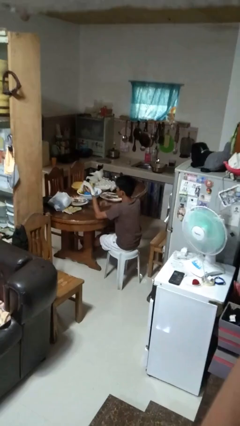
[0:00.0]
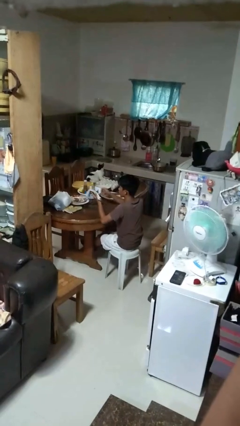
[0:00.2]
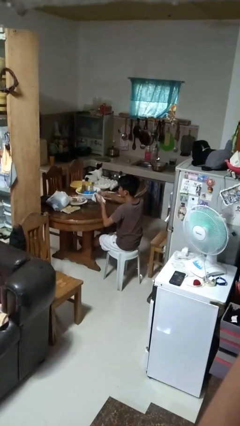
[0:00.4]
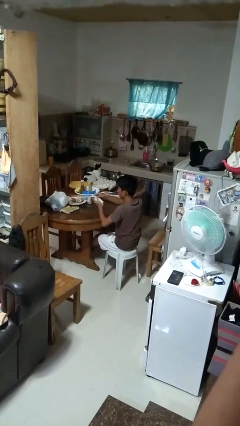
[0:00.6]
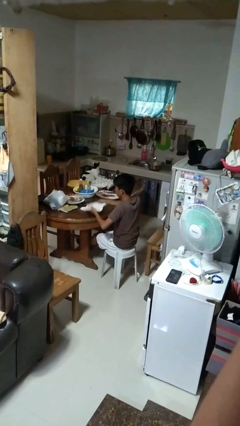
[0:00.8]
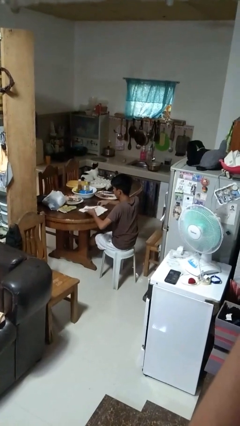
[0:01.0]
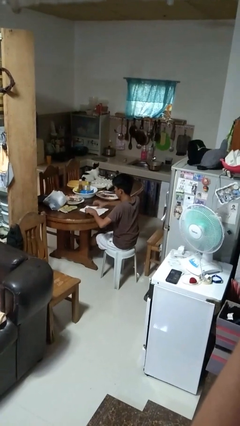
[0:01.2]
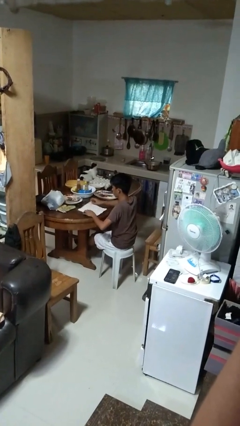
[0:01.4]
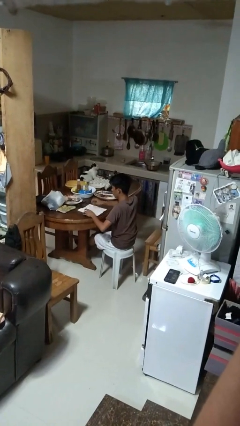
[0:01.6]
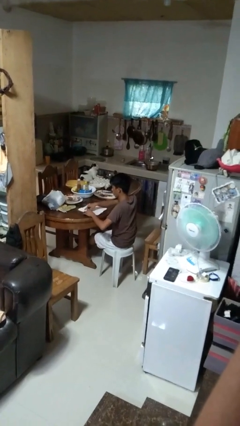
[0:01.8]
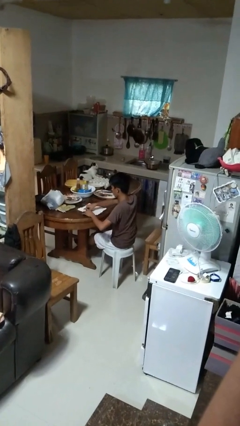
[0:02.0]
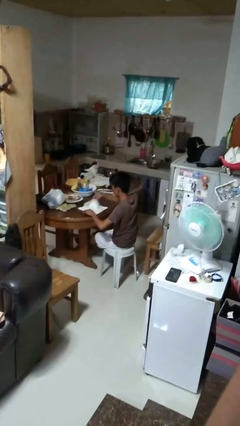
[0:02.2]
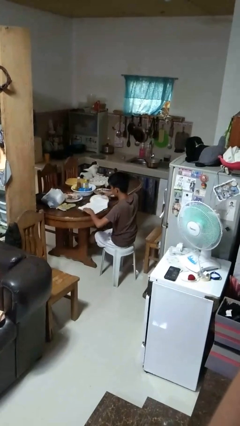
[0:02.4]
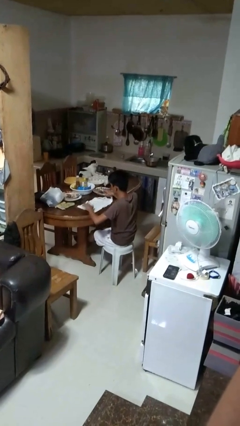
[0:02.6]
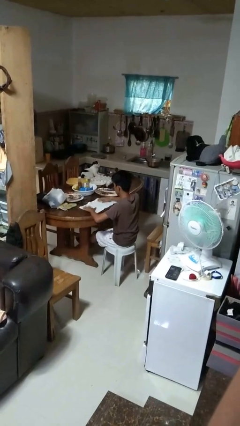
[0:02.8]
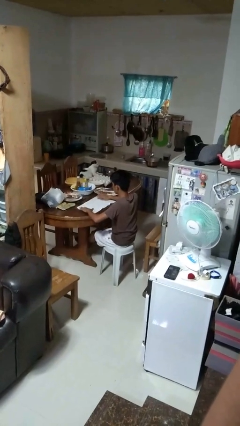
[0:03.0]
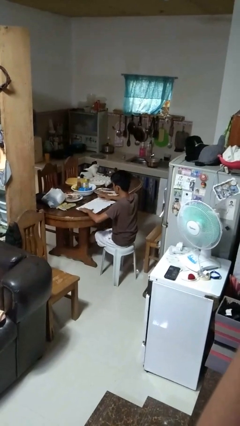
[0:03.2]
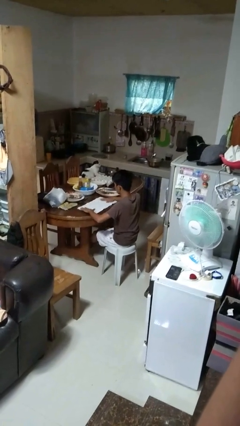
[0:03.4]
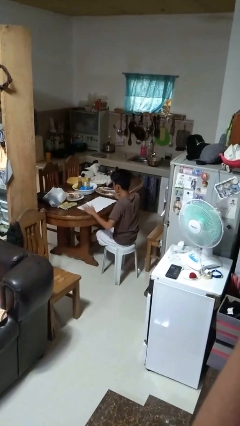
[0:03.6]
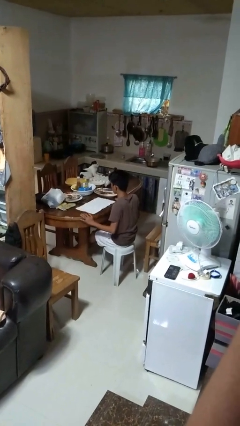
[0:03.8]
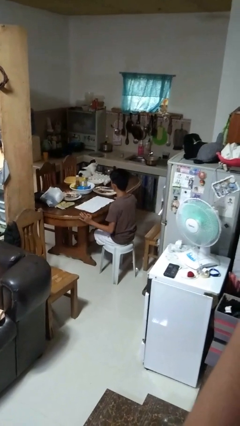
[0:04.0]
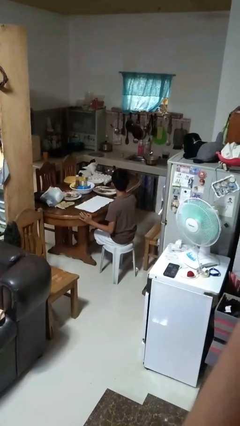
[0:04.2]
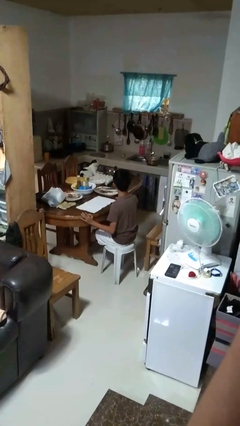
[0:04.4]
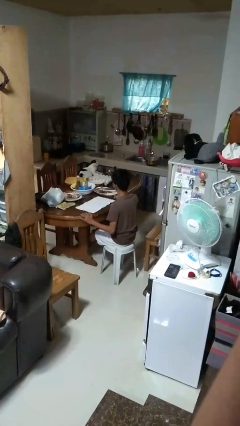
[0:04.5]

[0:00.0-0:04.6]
person spreads tablecloth

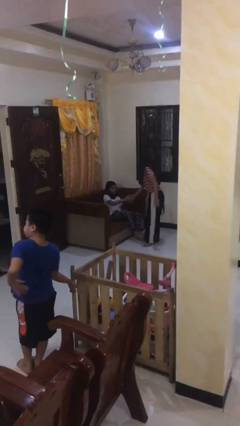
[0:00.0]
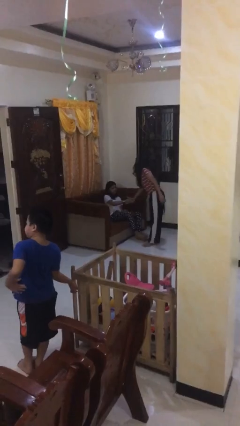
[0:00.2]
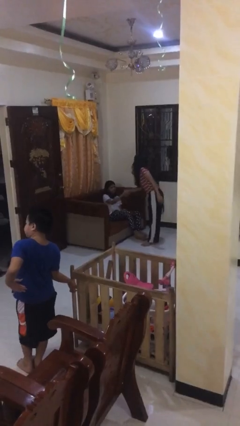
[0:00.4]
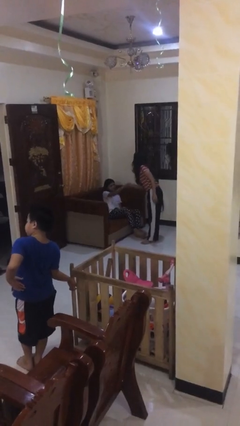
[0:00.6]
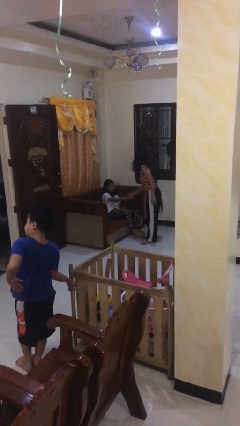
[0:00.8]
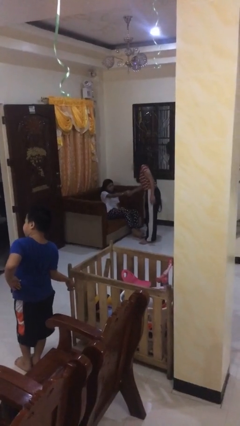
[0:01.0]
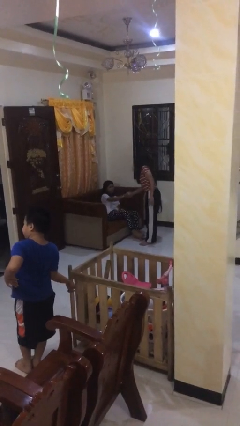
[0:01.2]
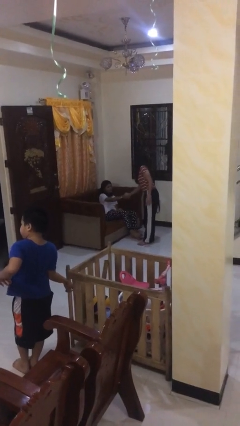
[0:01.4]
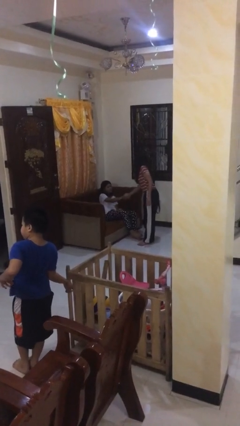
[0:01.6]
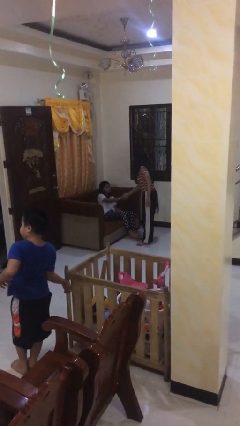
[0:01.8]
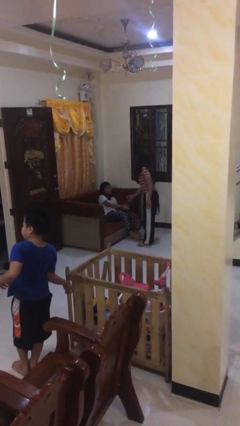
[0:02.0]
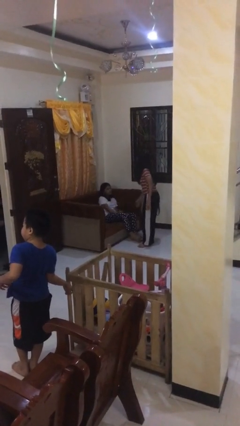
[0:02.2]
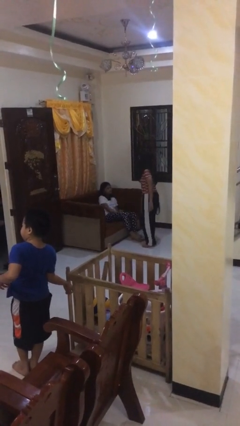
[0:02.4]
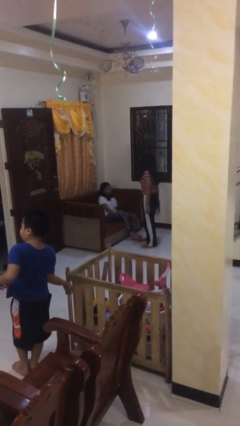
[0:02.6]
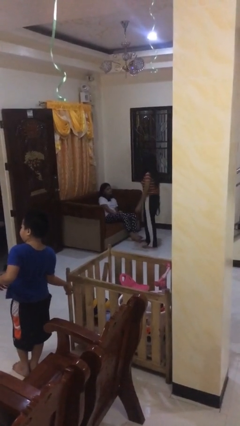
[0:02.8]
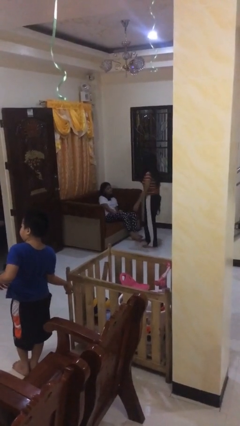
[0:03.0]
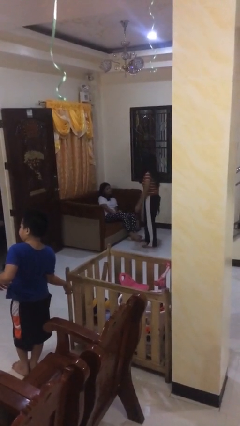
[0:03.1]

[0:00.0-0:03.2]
person shakes hand

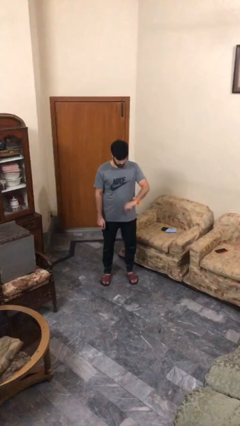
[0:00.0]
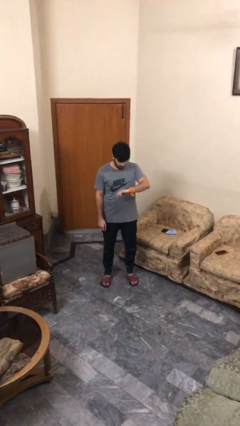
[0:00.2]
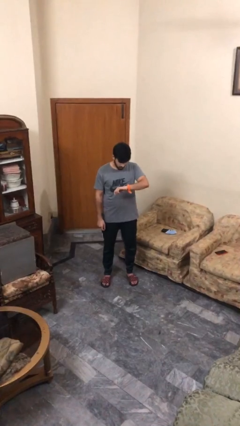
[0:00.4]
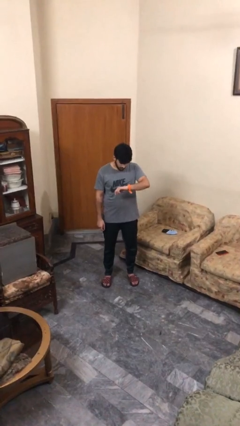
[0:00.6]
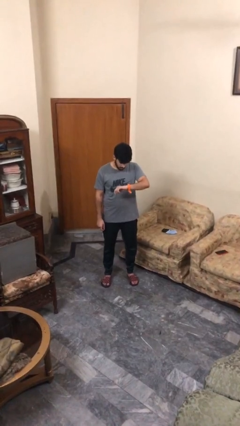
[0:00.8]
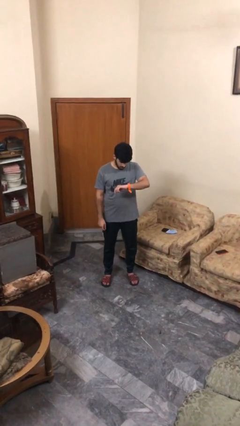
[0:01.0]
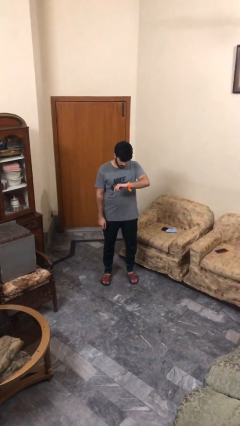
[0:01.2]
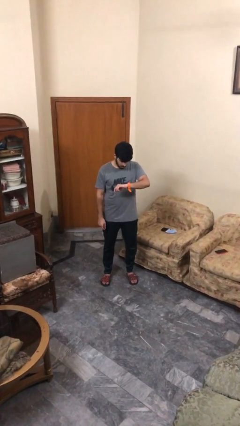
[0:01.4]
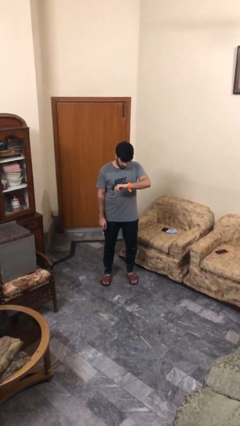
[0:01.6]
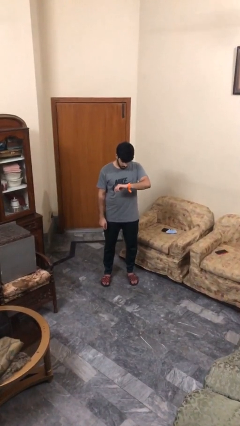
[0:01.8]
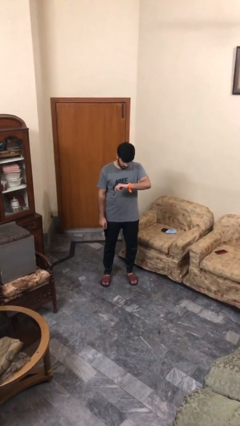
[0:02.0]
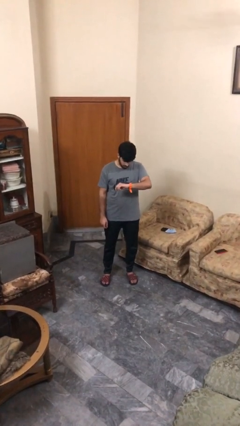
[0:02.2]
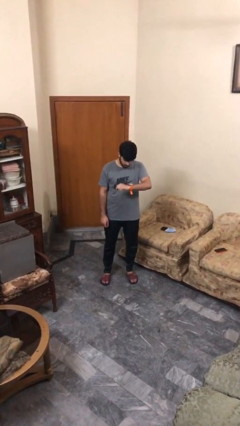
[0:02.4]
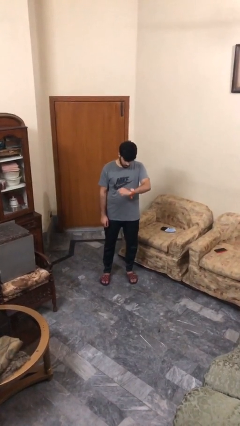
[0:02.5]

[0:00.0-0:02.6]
person looks at wristwatch

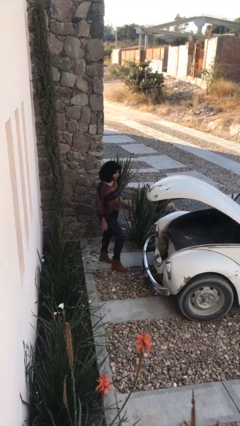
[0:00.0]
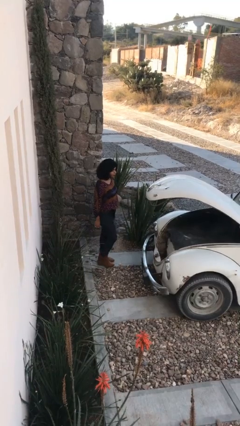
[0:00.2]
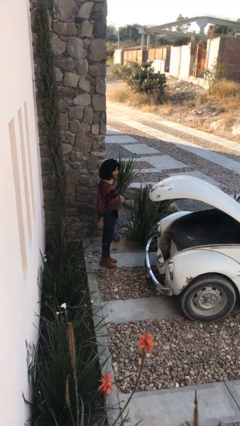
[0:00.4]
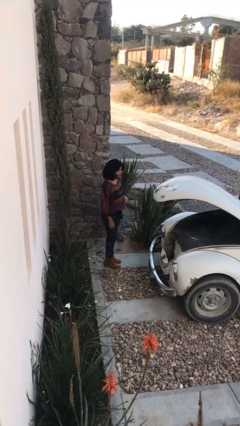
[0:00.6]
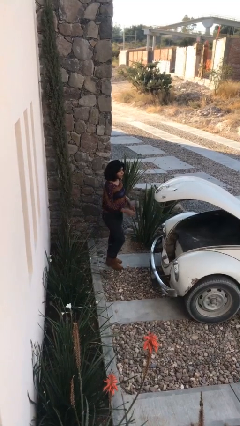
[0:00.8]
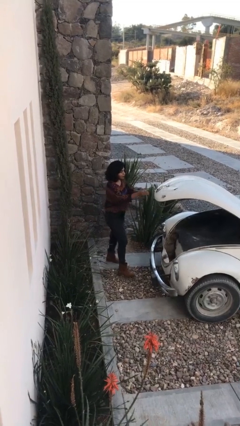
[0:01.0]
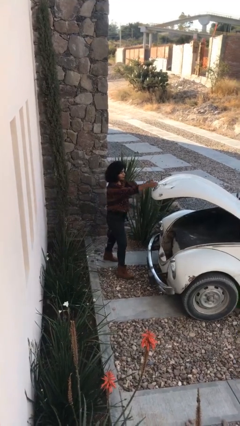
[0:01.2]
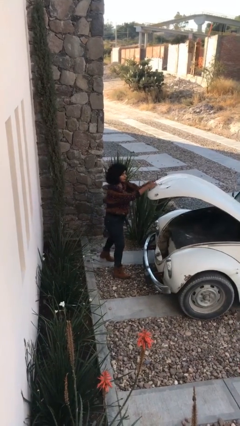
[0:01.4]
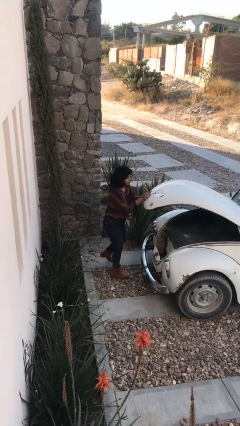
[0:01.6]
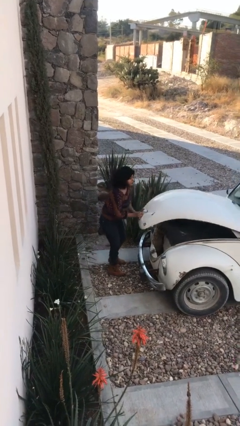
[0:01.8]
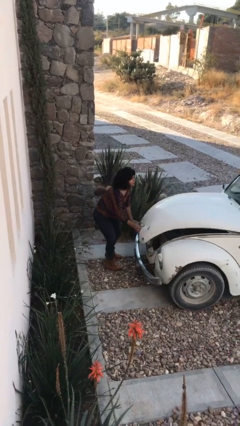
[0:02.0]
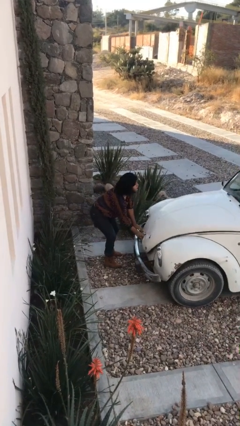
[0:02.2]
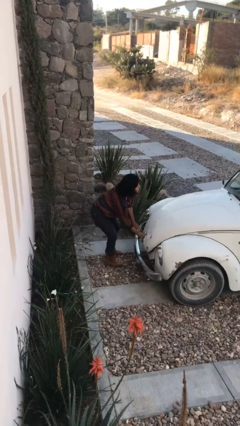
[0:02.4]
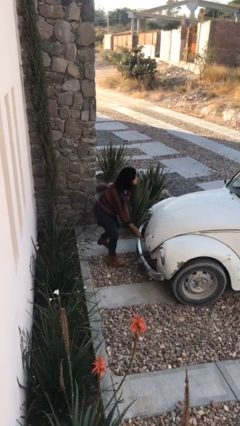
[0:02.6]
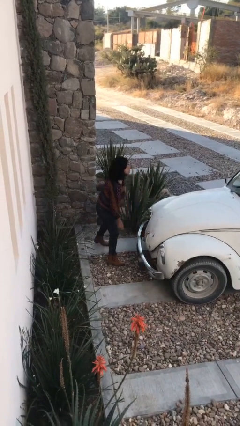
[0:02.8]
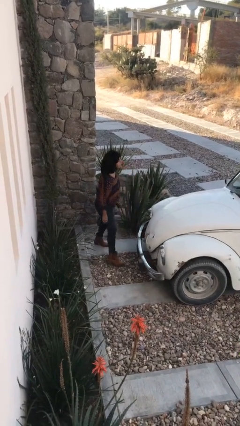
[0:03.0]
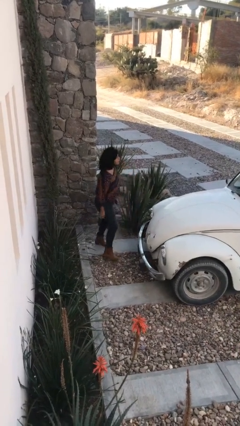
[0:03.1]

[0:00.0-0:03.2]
person closes car trunk

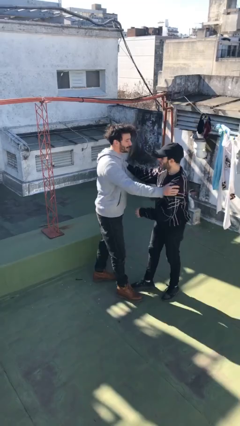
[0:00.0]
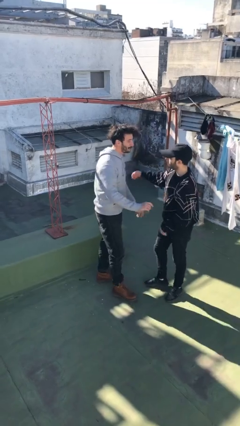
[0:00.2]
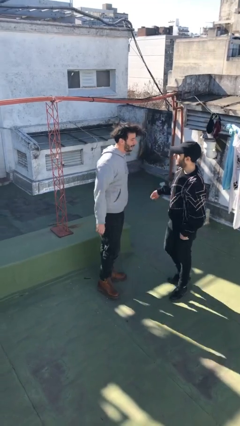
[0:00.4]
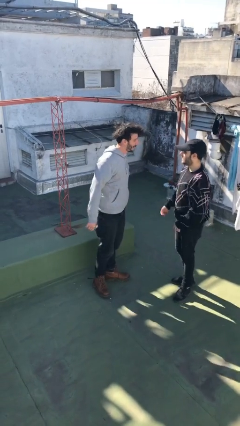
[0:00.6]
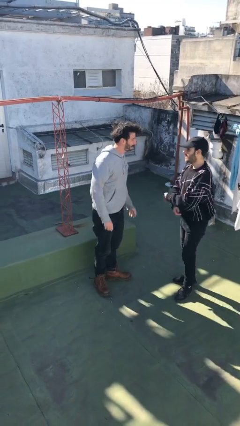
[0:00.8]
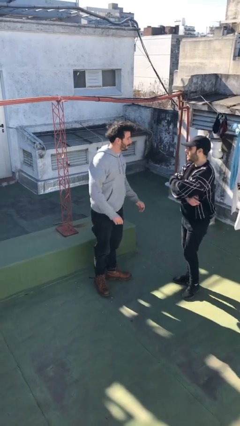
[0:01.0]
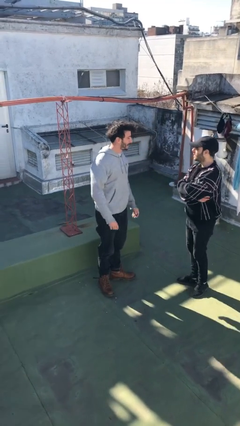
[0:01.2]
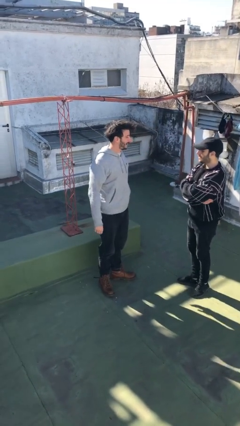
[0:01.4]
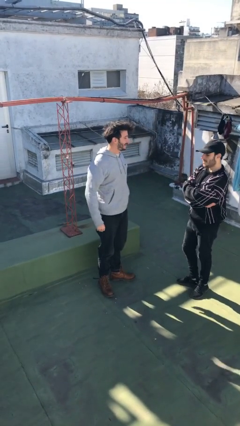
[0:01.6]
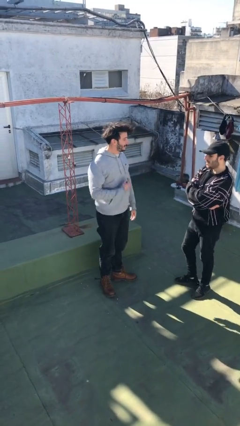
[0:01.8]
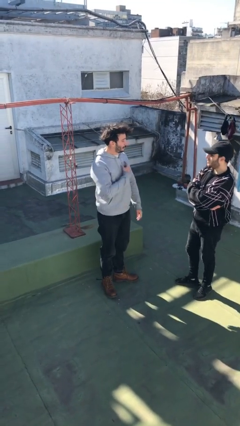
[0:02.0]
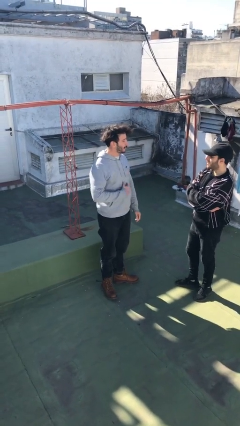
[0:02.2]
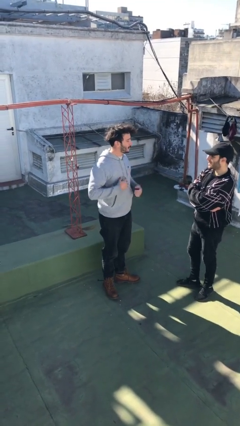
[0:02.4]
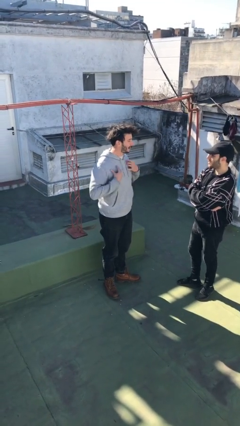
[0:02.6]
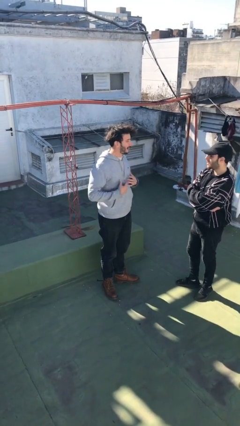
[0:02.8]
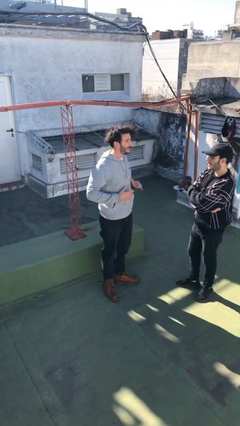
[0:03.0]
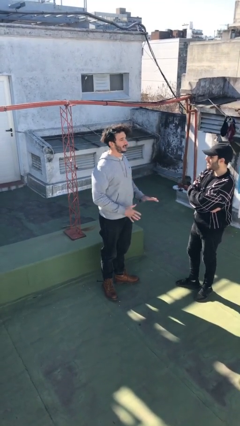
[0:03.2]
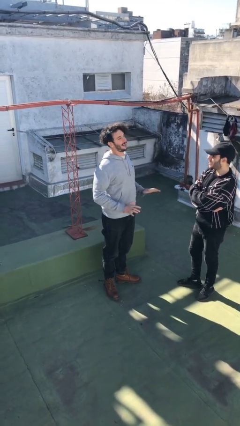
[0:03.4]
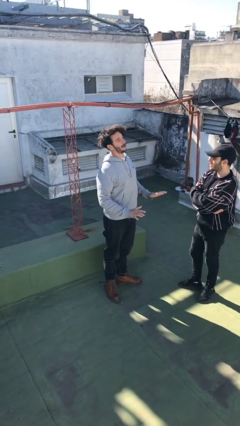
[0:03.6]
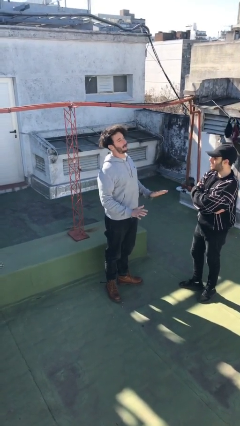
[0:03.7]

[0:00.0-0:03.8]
person talks to person

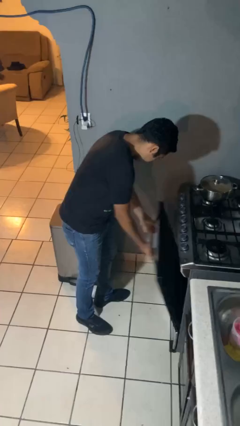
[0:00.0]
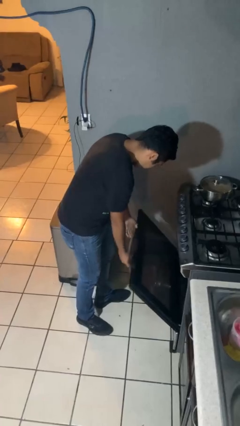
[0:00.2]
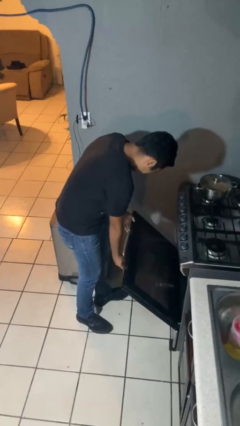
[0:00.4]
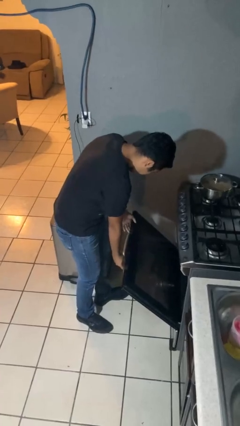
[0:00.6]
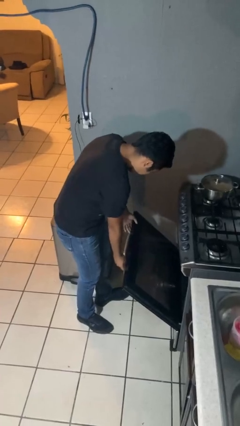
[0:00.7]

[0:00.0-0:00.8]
person opens oven door
